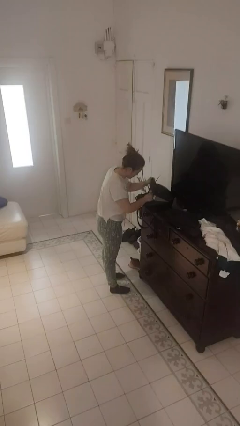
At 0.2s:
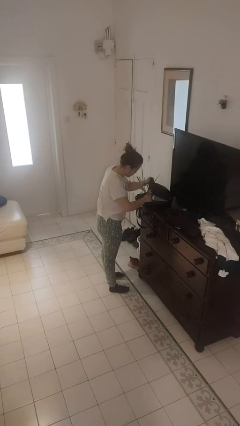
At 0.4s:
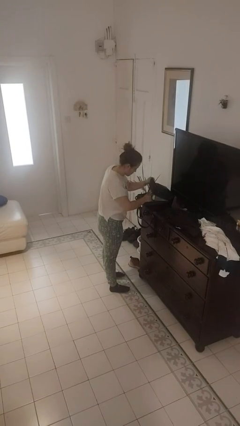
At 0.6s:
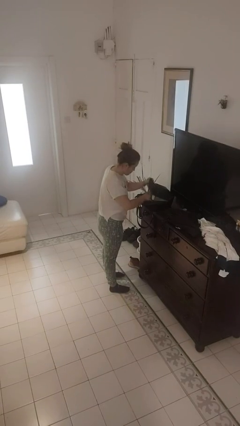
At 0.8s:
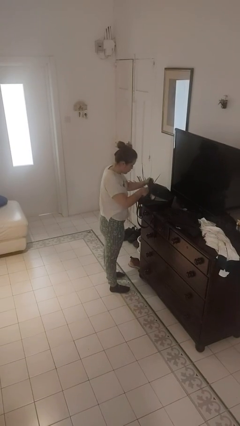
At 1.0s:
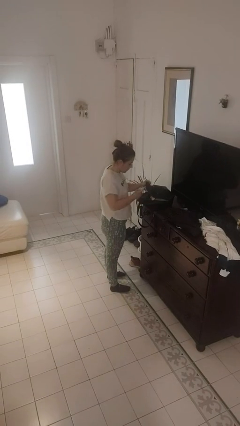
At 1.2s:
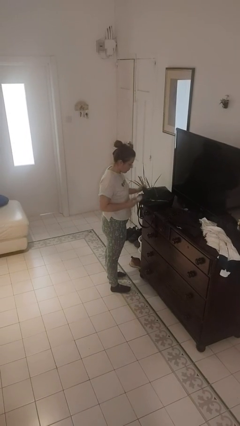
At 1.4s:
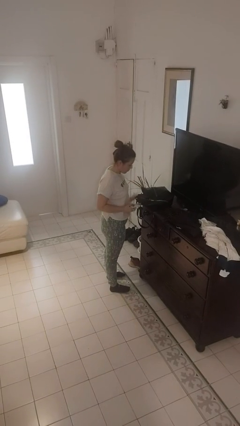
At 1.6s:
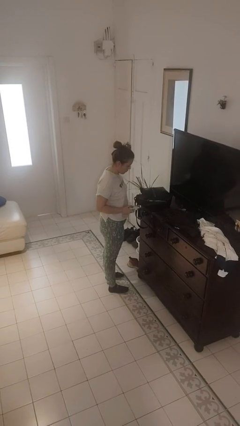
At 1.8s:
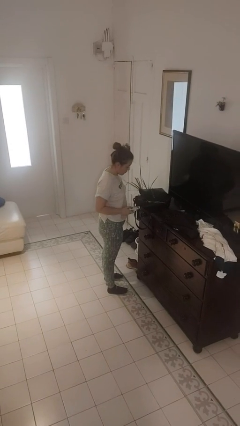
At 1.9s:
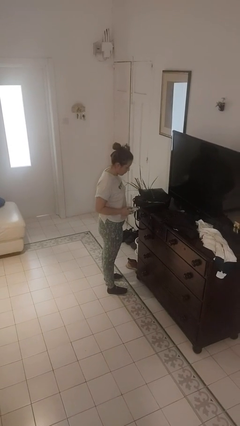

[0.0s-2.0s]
person takes object from purse

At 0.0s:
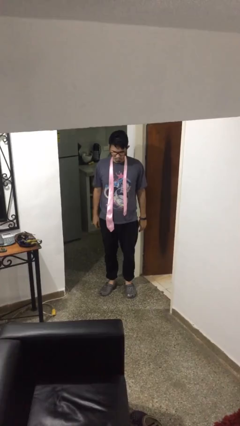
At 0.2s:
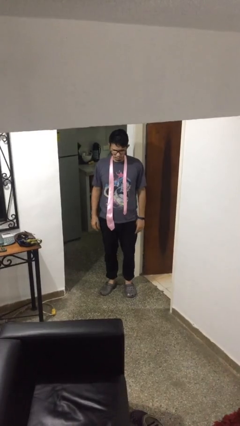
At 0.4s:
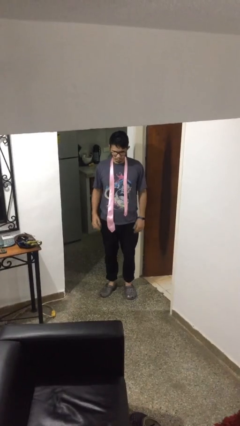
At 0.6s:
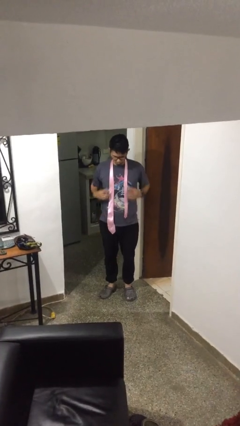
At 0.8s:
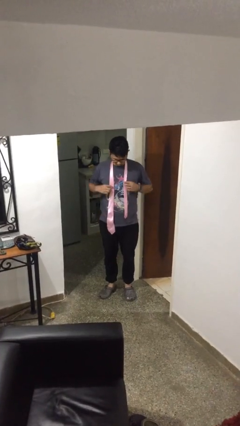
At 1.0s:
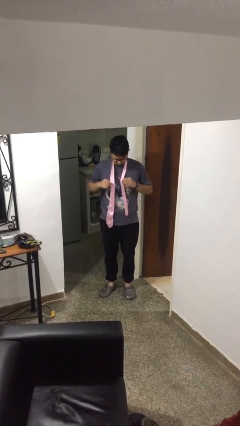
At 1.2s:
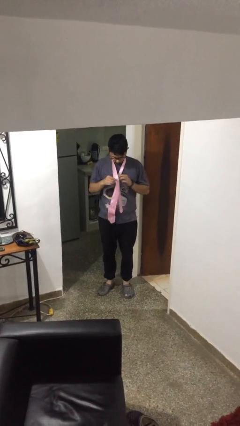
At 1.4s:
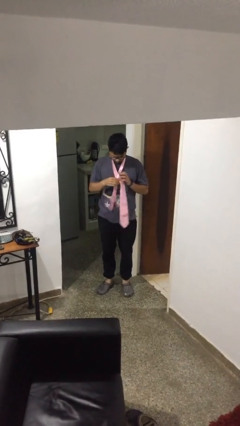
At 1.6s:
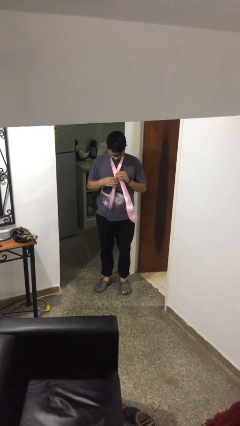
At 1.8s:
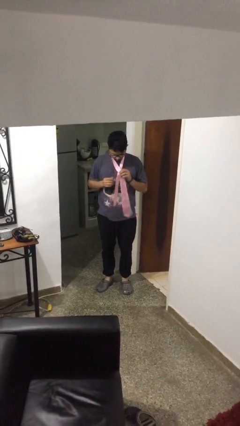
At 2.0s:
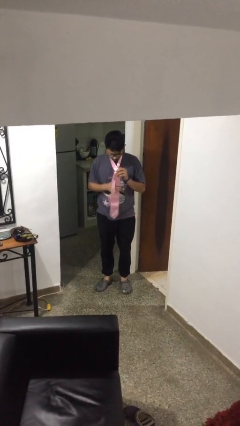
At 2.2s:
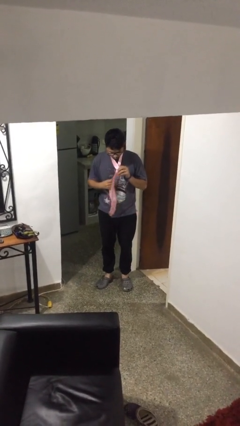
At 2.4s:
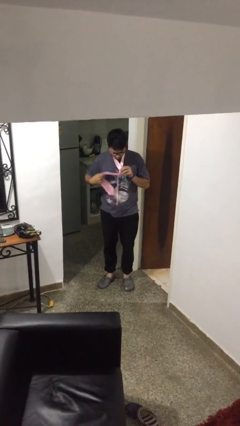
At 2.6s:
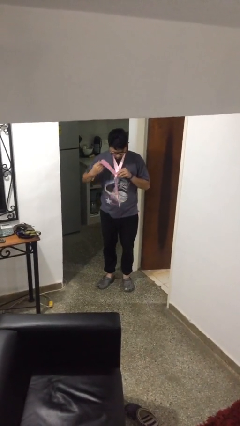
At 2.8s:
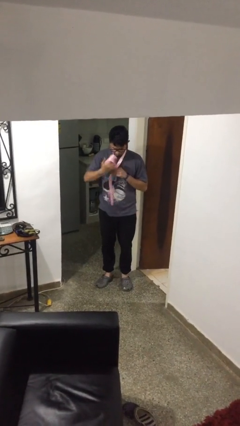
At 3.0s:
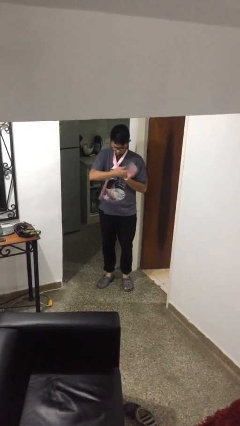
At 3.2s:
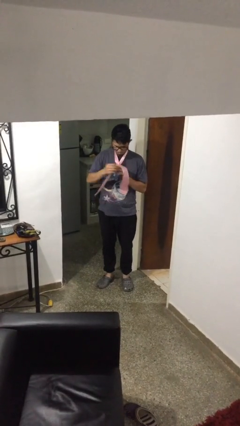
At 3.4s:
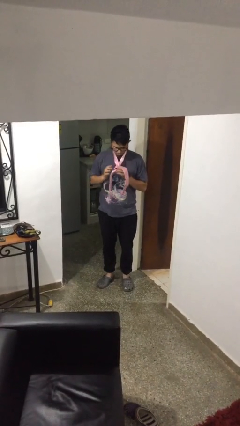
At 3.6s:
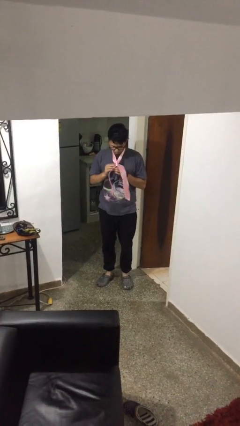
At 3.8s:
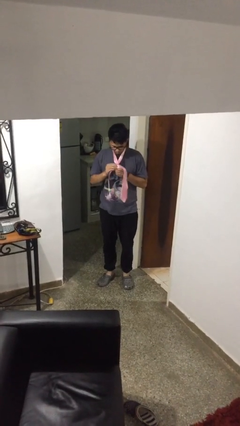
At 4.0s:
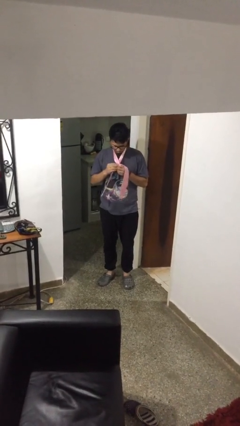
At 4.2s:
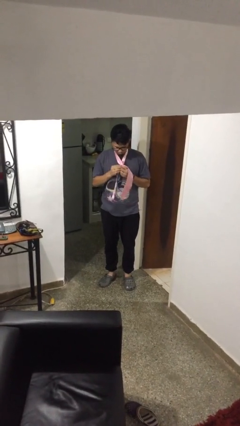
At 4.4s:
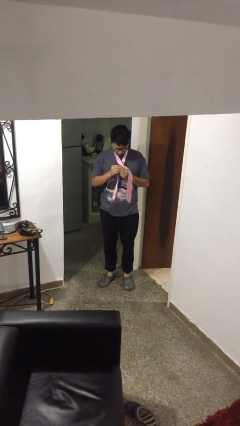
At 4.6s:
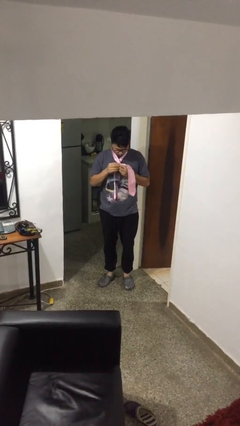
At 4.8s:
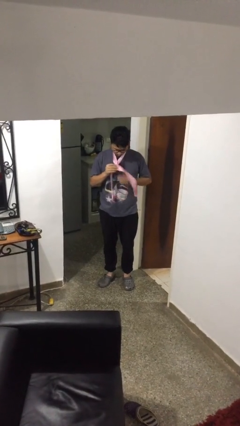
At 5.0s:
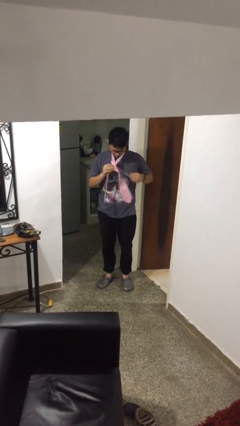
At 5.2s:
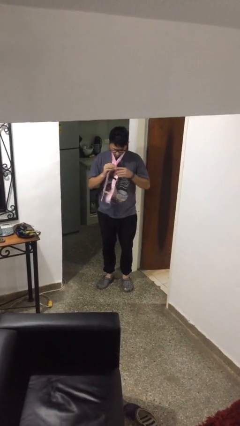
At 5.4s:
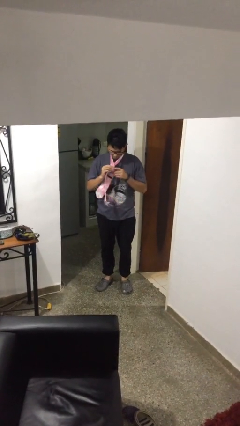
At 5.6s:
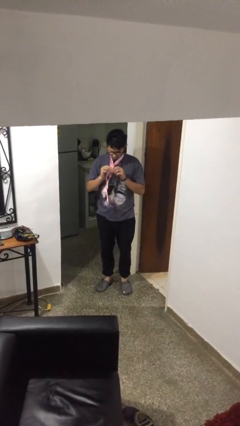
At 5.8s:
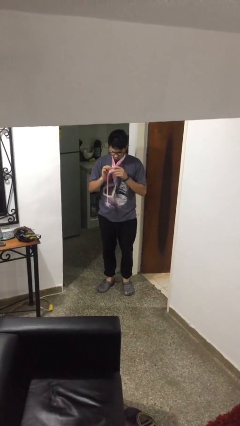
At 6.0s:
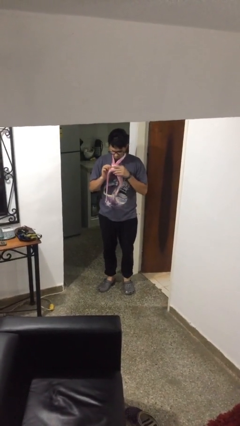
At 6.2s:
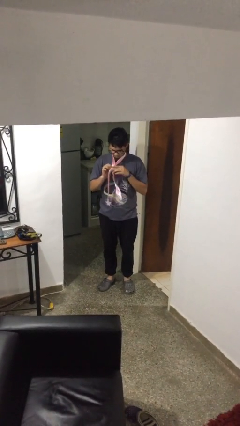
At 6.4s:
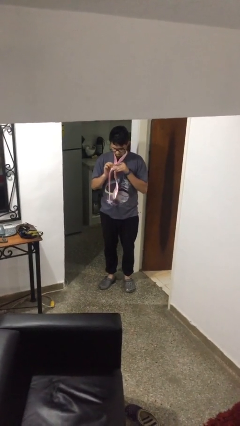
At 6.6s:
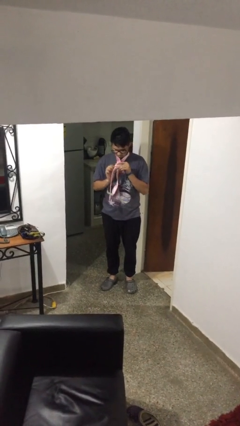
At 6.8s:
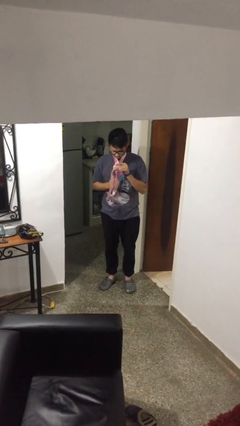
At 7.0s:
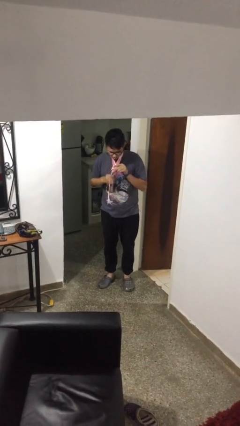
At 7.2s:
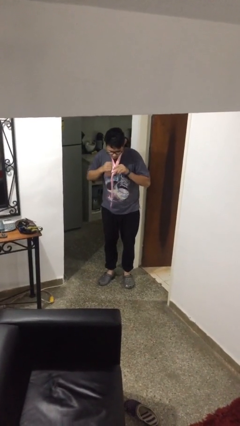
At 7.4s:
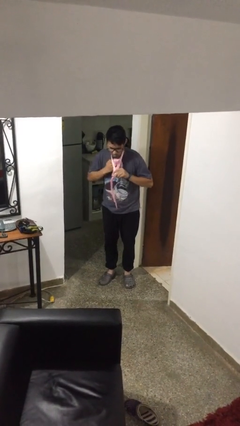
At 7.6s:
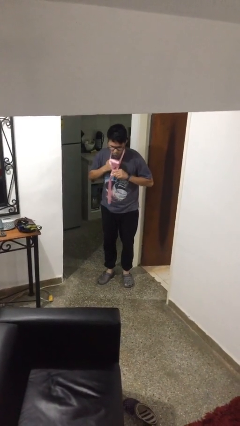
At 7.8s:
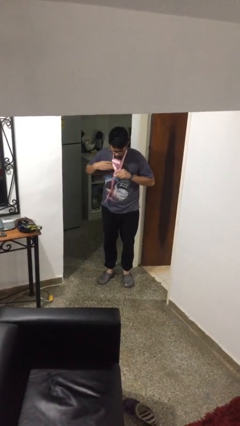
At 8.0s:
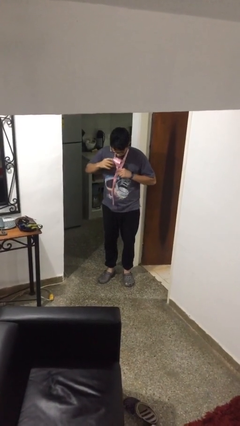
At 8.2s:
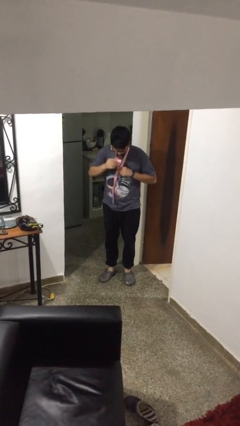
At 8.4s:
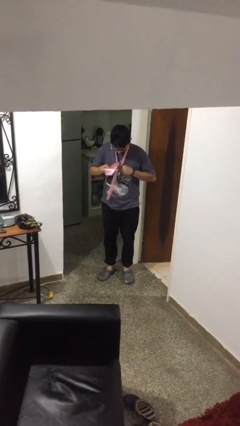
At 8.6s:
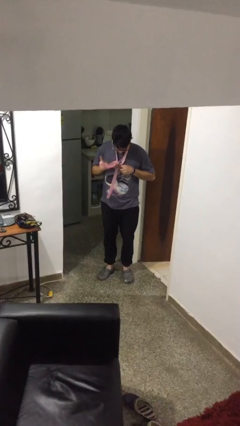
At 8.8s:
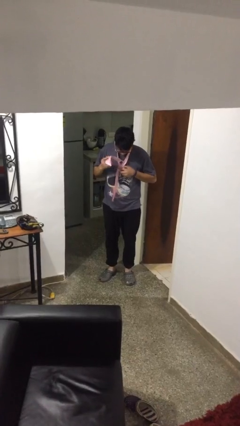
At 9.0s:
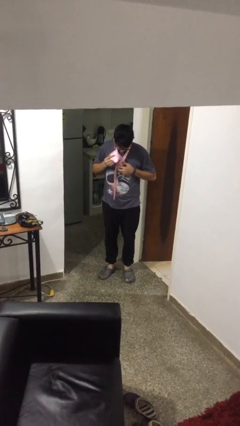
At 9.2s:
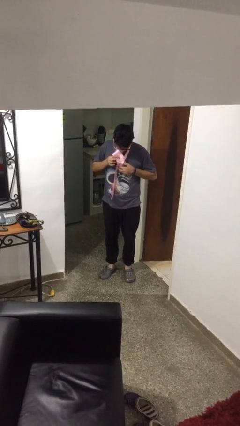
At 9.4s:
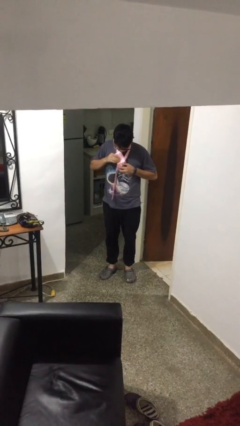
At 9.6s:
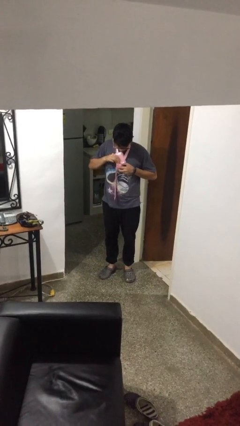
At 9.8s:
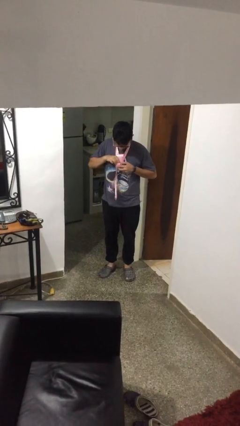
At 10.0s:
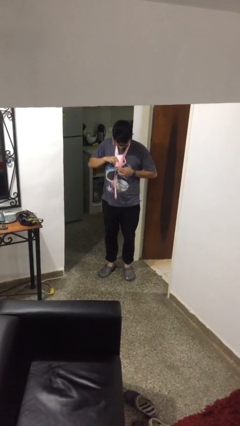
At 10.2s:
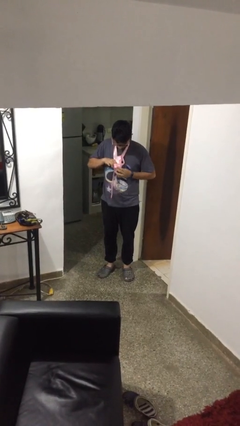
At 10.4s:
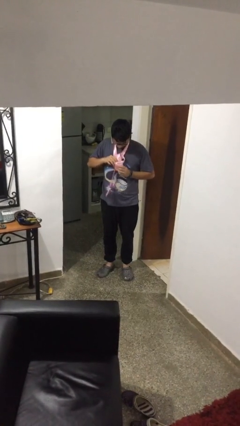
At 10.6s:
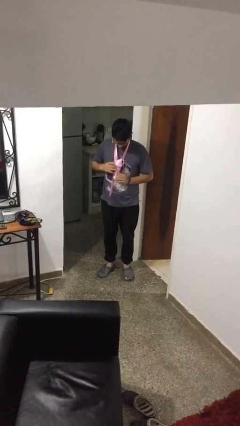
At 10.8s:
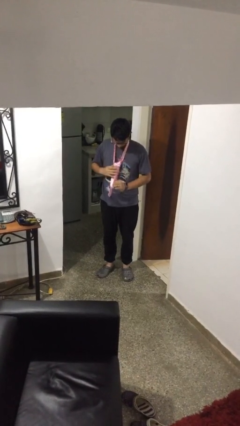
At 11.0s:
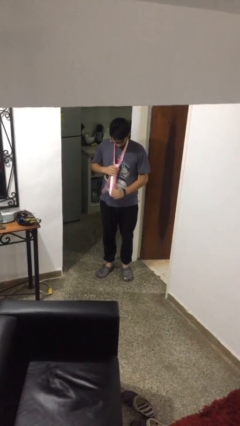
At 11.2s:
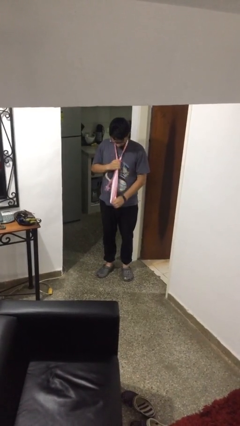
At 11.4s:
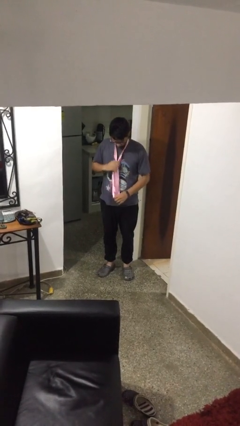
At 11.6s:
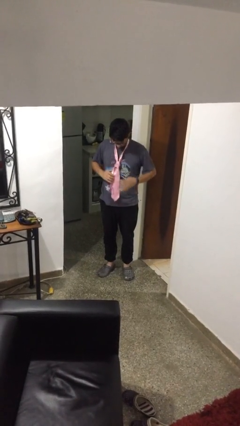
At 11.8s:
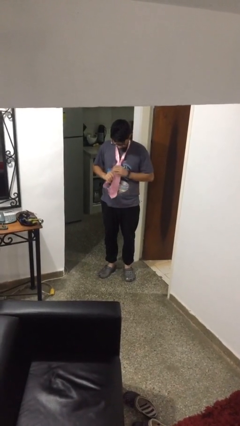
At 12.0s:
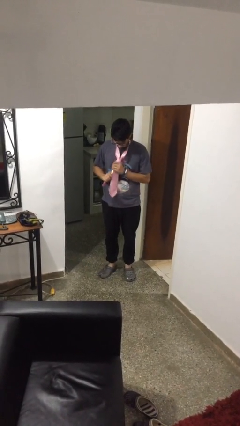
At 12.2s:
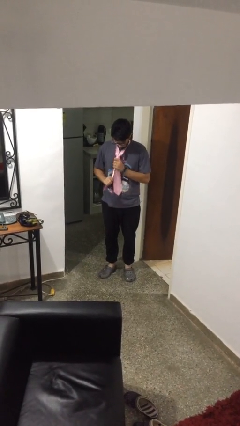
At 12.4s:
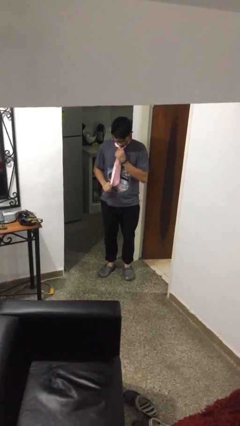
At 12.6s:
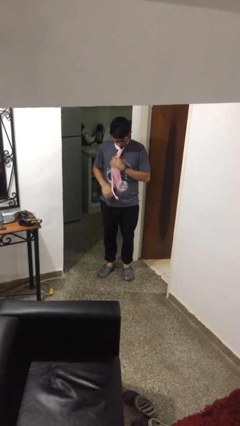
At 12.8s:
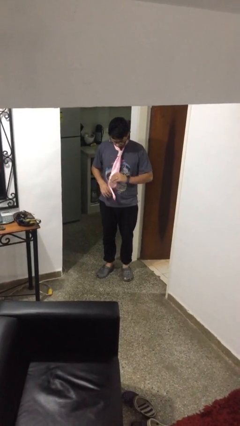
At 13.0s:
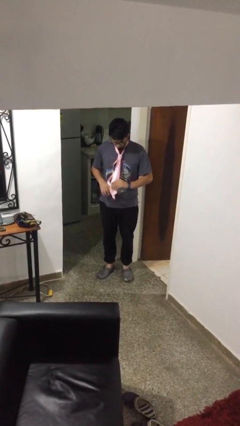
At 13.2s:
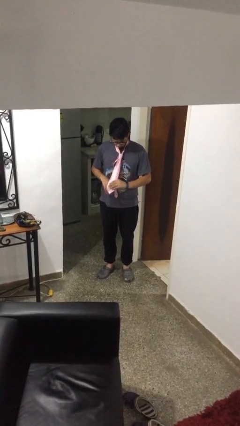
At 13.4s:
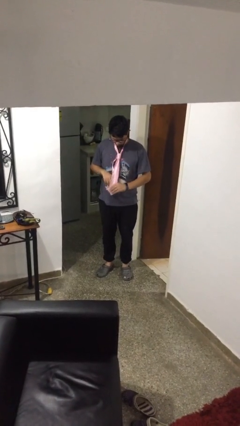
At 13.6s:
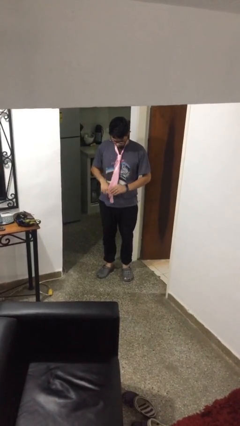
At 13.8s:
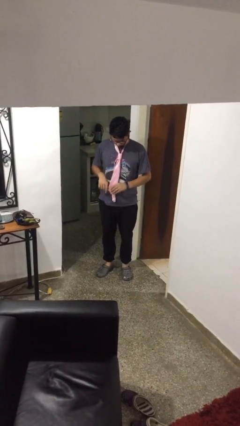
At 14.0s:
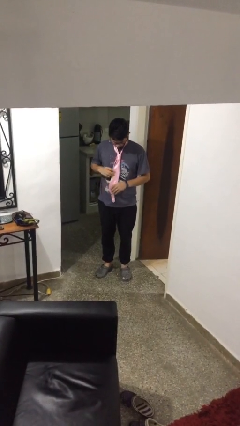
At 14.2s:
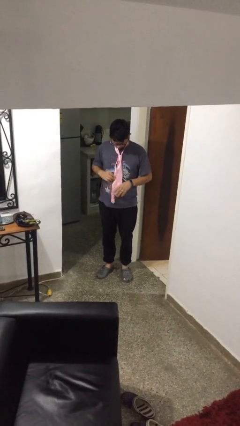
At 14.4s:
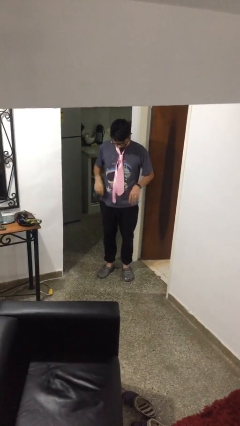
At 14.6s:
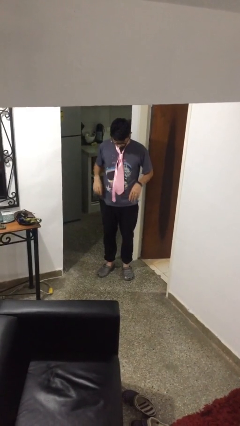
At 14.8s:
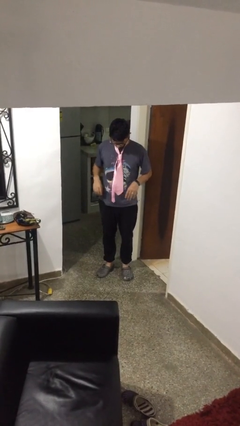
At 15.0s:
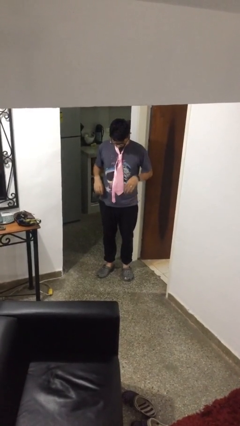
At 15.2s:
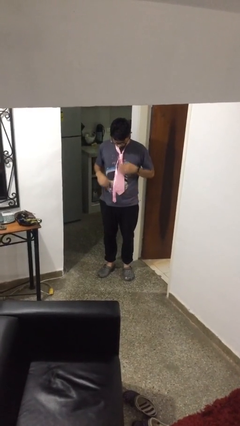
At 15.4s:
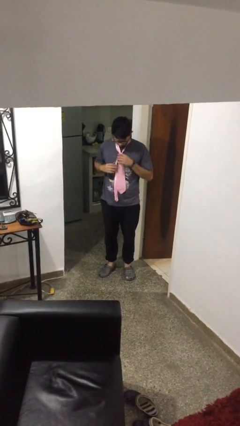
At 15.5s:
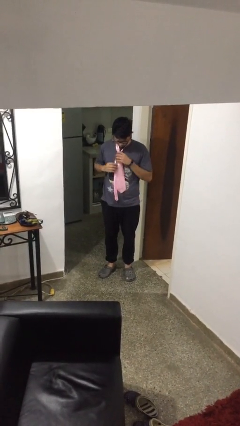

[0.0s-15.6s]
person puts on necktie

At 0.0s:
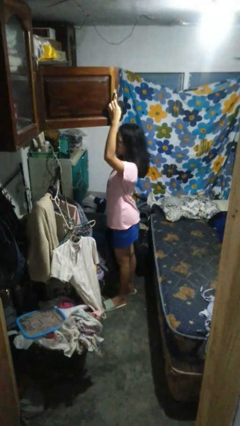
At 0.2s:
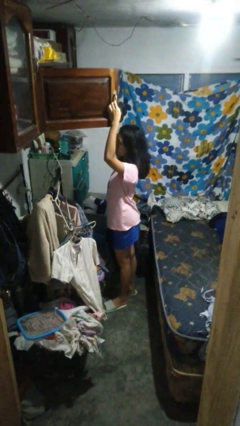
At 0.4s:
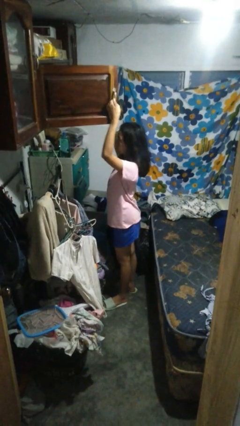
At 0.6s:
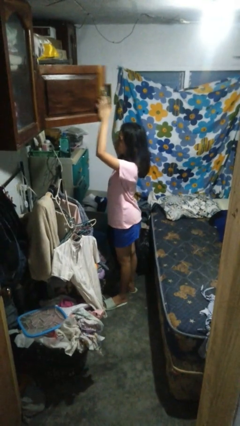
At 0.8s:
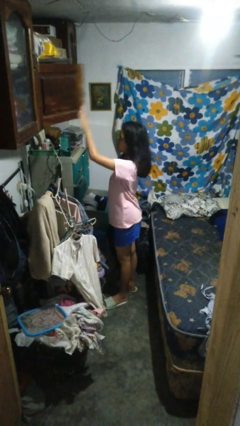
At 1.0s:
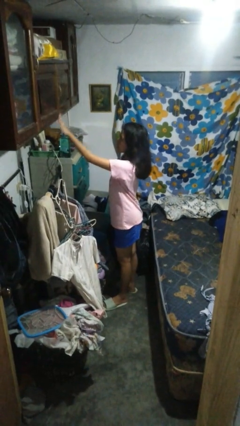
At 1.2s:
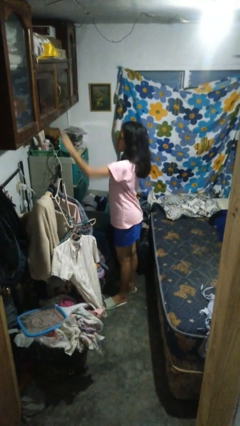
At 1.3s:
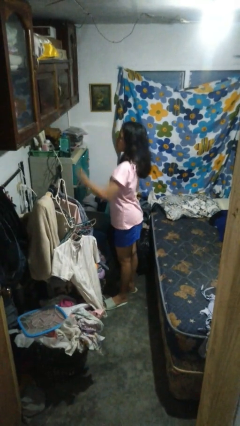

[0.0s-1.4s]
person closes closet door
